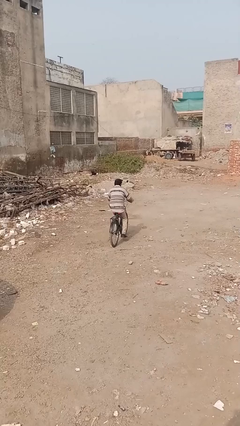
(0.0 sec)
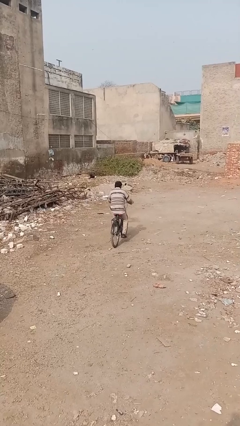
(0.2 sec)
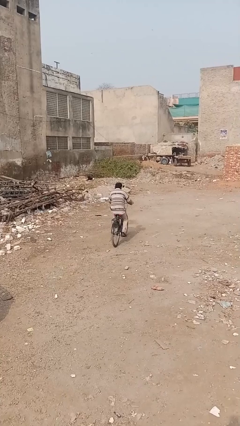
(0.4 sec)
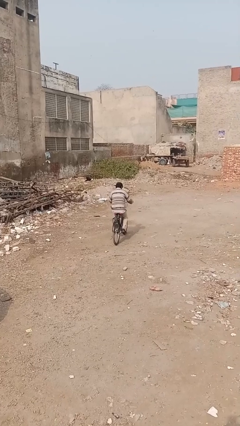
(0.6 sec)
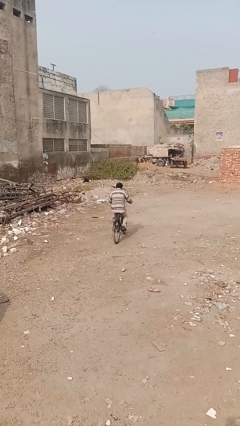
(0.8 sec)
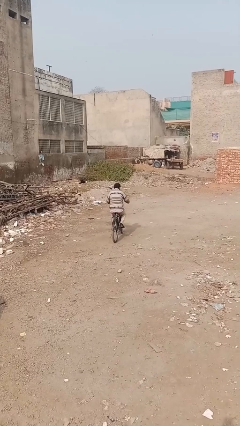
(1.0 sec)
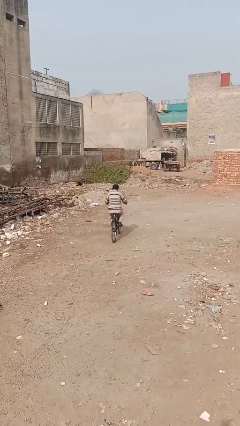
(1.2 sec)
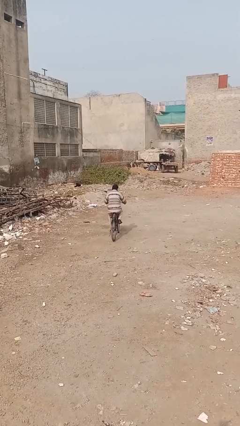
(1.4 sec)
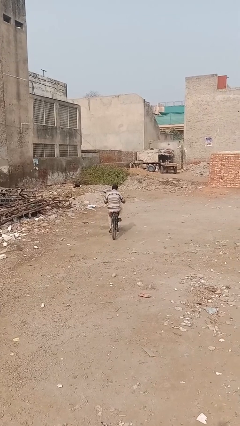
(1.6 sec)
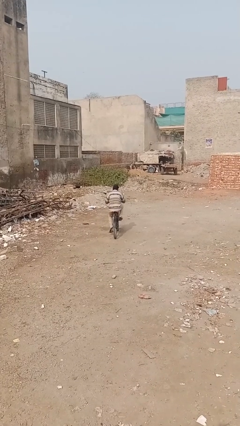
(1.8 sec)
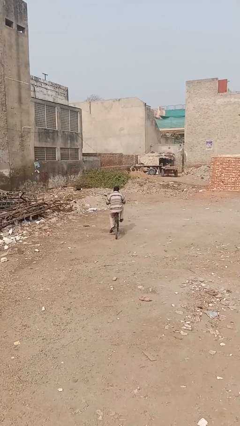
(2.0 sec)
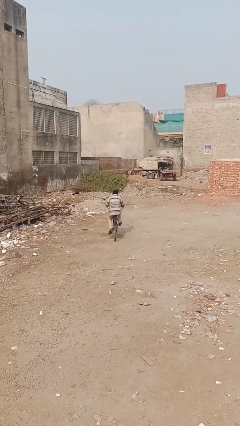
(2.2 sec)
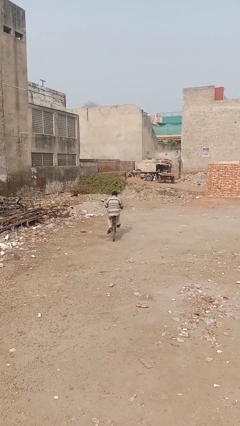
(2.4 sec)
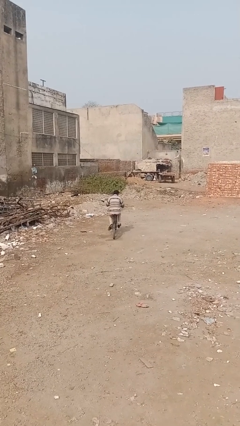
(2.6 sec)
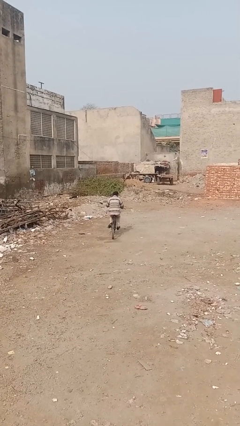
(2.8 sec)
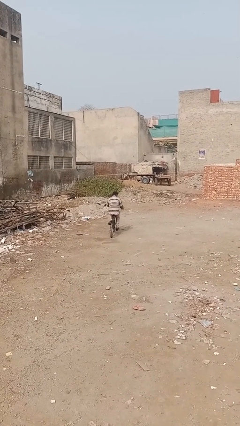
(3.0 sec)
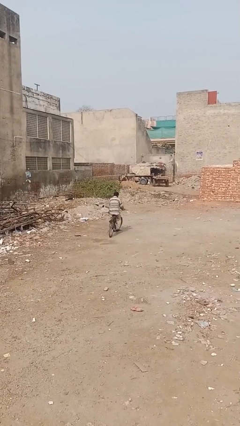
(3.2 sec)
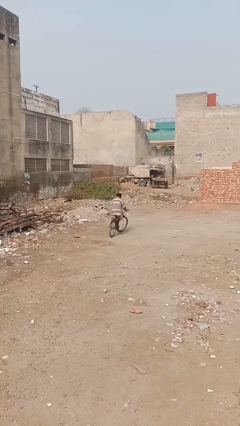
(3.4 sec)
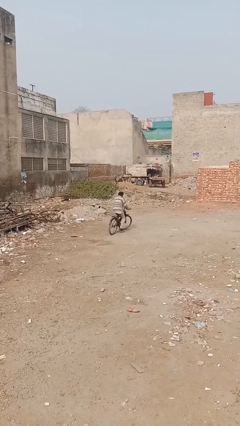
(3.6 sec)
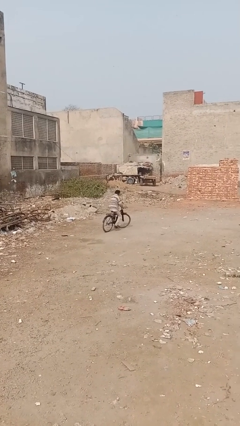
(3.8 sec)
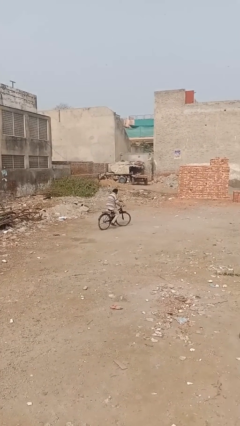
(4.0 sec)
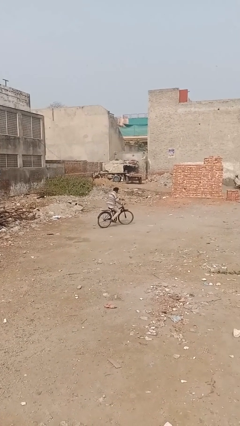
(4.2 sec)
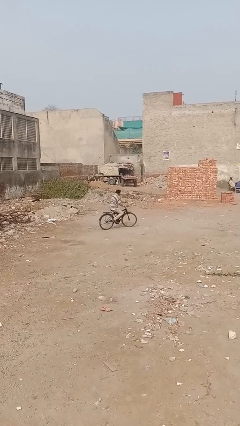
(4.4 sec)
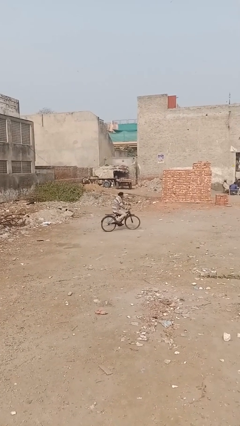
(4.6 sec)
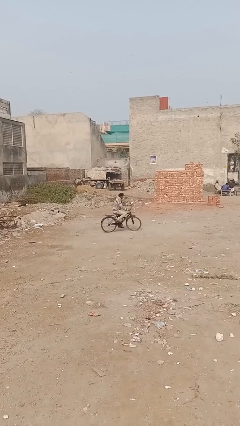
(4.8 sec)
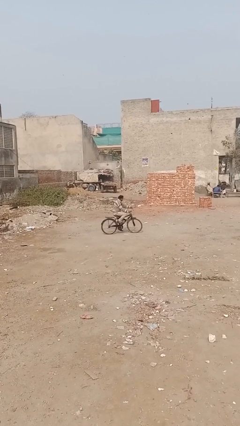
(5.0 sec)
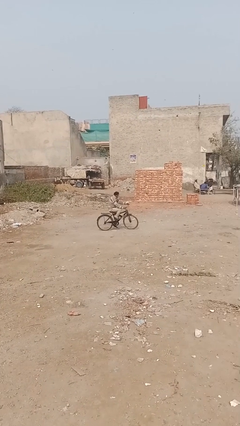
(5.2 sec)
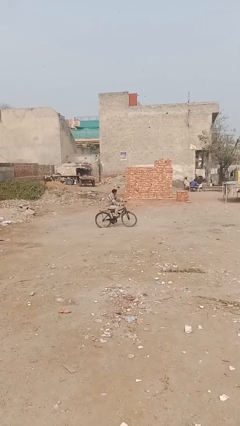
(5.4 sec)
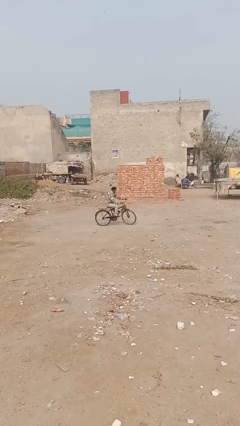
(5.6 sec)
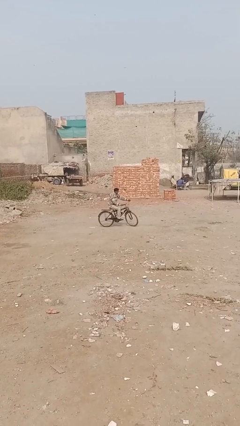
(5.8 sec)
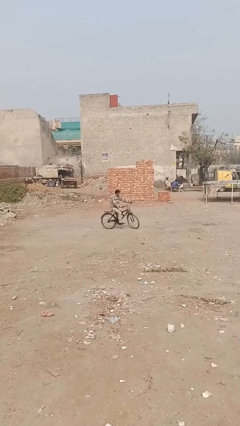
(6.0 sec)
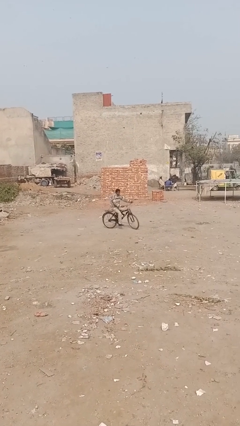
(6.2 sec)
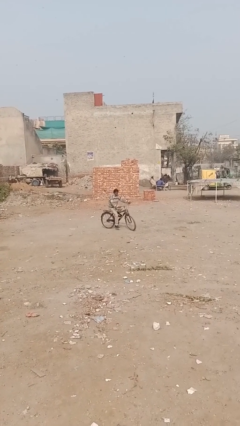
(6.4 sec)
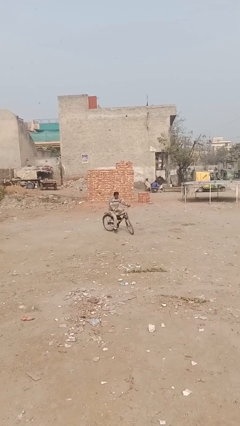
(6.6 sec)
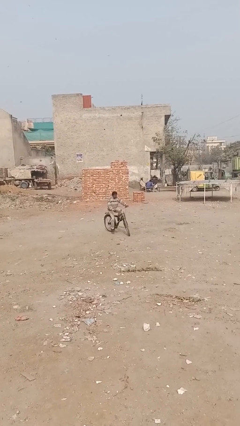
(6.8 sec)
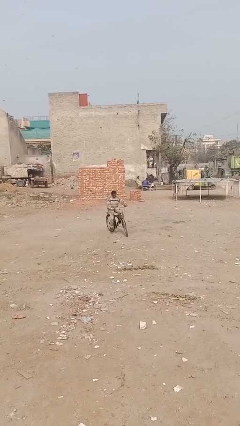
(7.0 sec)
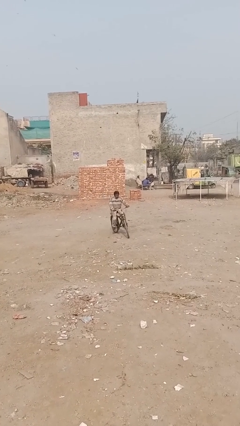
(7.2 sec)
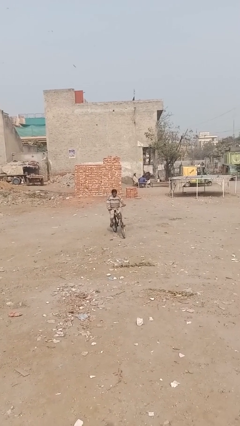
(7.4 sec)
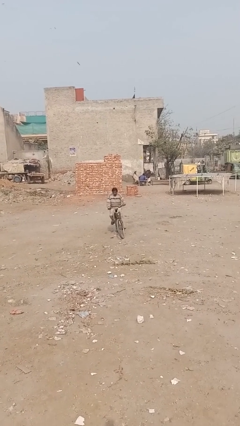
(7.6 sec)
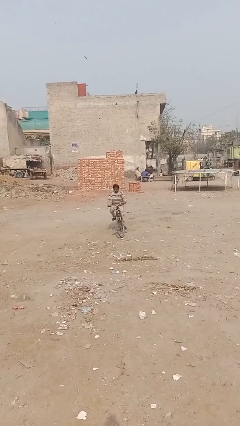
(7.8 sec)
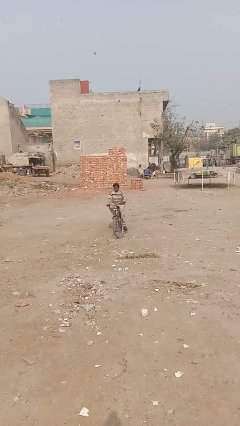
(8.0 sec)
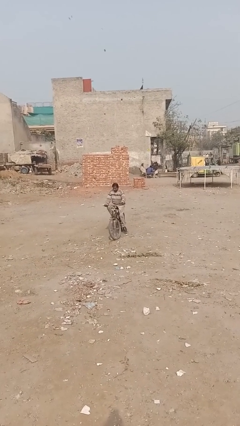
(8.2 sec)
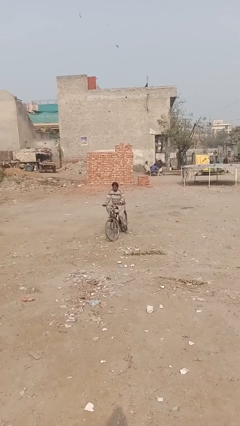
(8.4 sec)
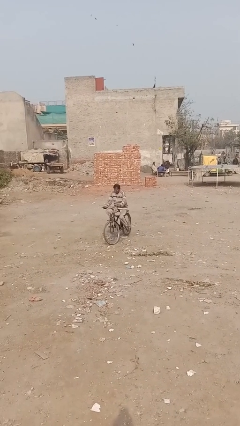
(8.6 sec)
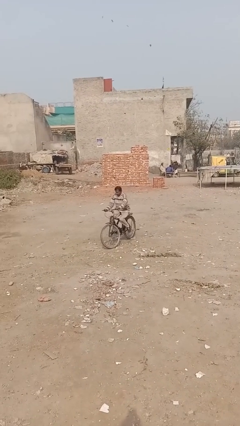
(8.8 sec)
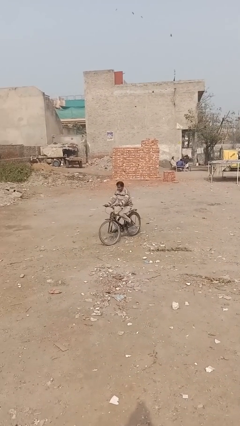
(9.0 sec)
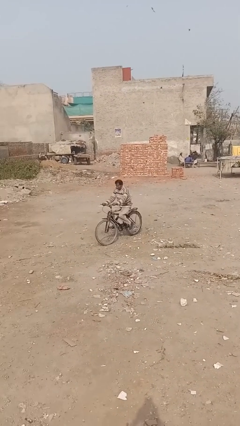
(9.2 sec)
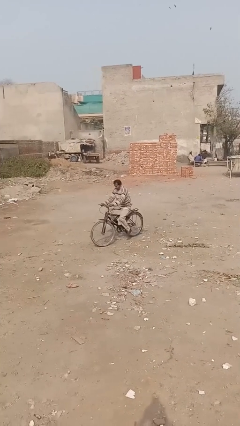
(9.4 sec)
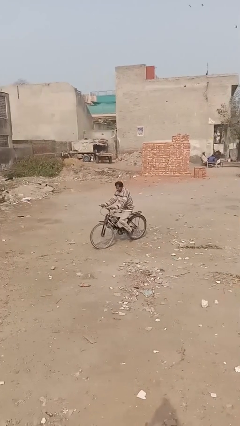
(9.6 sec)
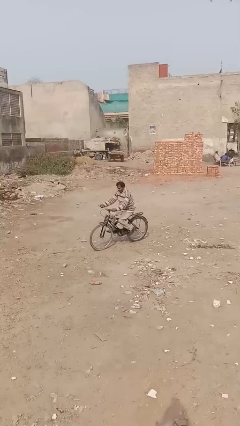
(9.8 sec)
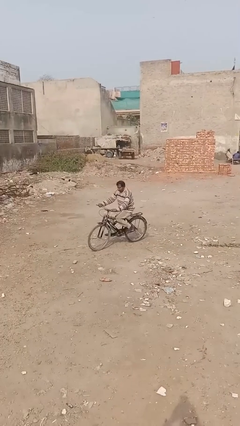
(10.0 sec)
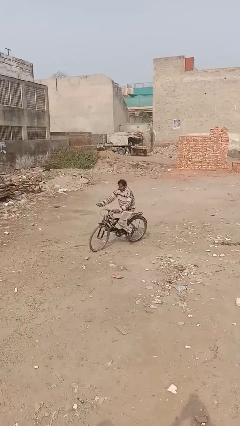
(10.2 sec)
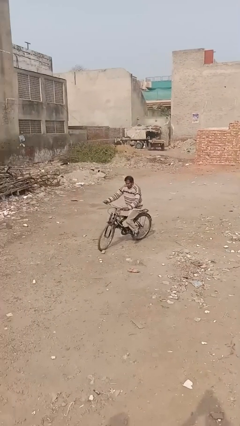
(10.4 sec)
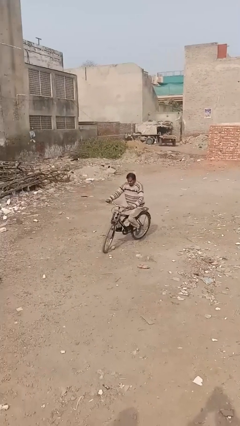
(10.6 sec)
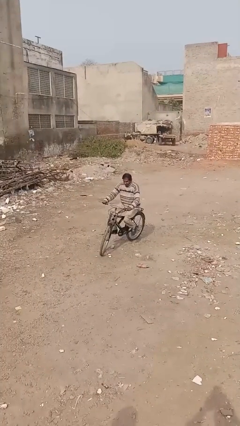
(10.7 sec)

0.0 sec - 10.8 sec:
person rides bicycle

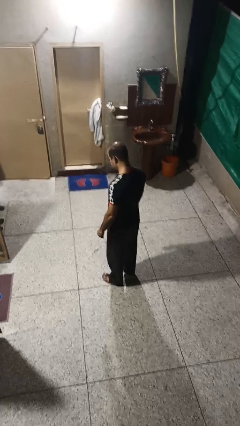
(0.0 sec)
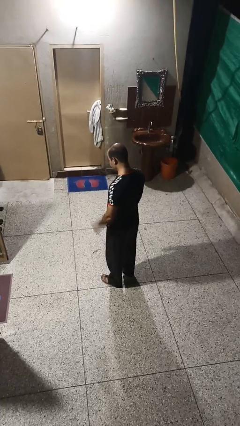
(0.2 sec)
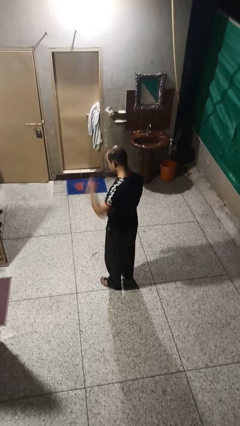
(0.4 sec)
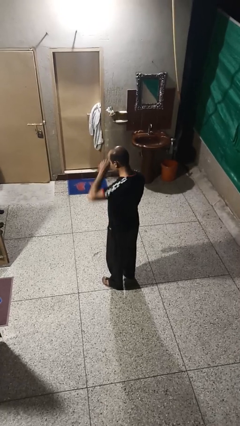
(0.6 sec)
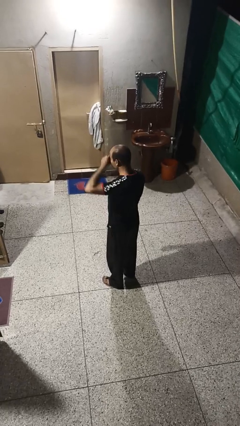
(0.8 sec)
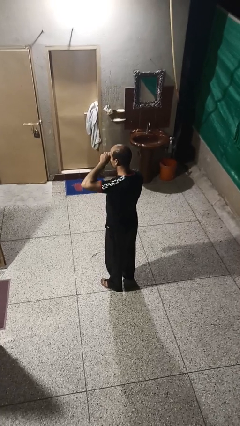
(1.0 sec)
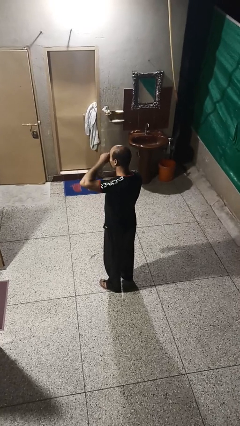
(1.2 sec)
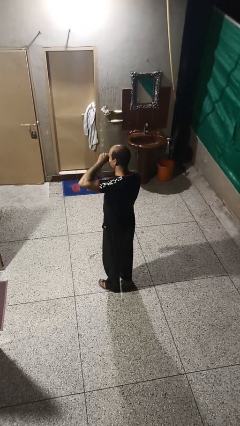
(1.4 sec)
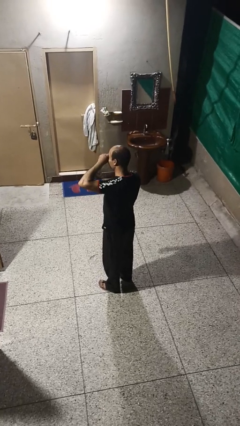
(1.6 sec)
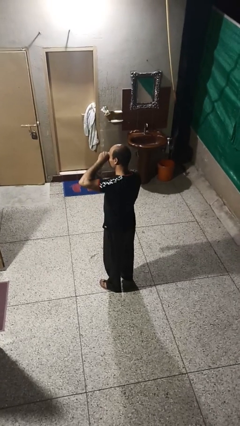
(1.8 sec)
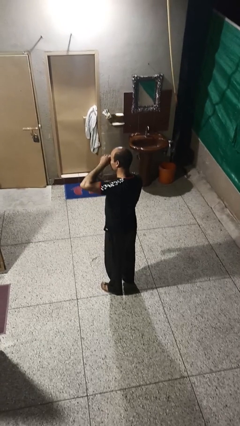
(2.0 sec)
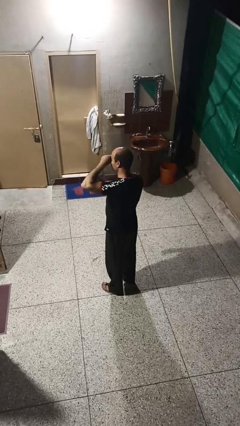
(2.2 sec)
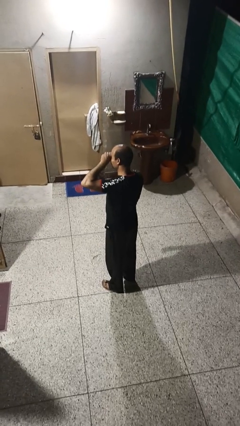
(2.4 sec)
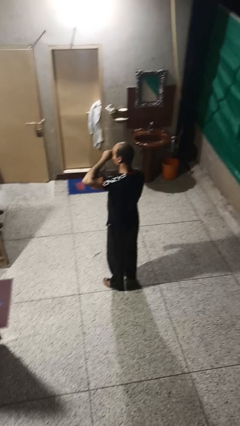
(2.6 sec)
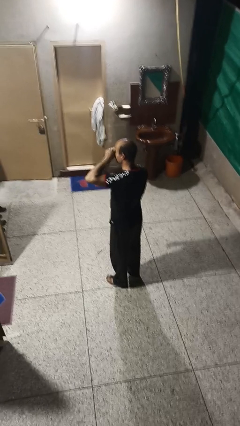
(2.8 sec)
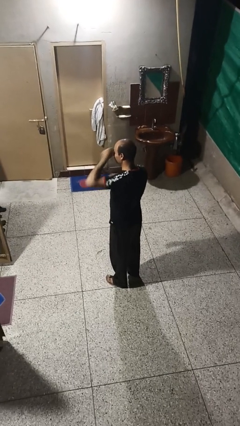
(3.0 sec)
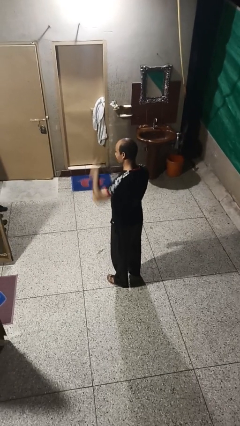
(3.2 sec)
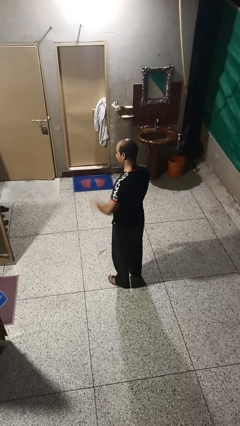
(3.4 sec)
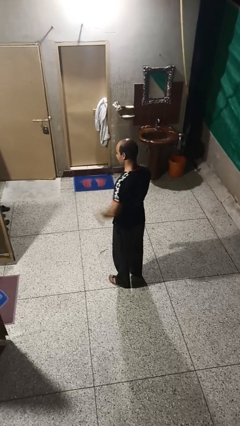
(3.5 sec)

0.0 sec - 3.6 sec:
person rubs eyes

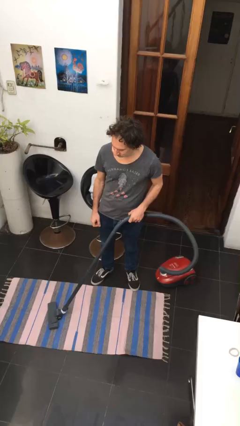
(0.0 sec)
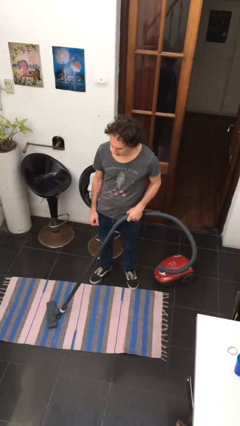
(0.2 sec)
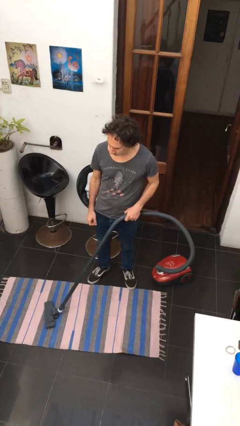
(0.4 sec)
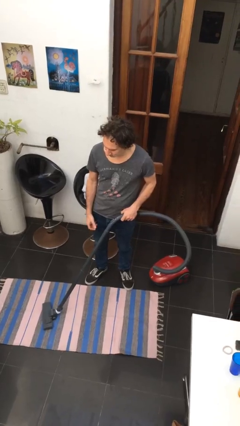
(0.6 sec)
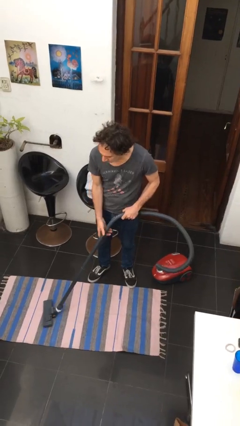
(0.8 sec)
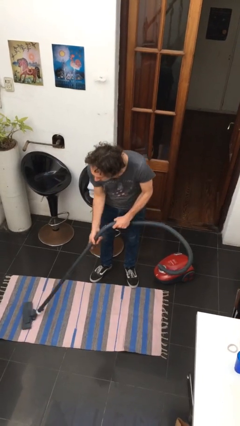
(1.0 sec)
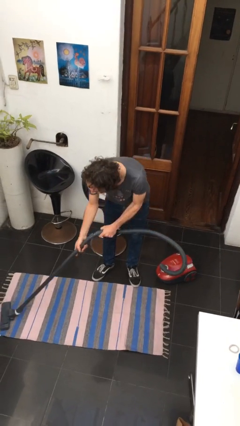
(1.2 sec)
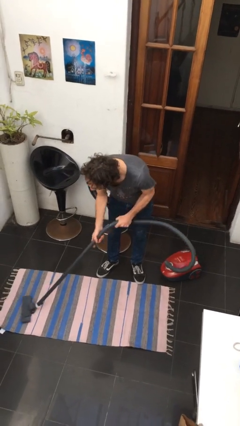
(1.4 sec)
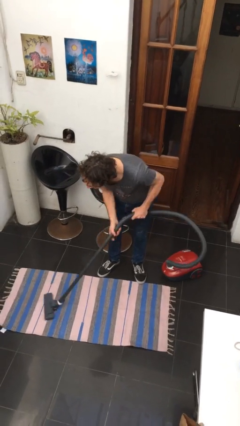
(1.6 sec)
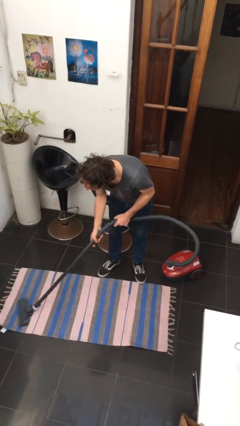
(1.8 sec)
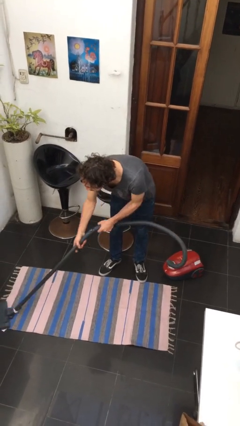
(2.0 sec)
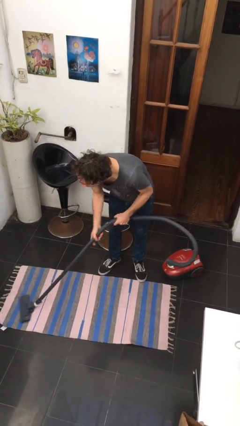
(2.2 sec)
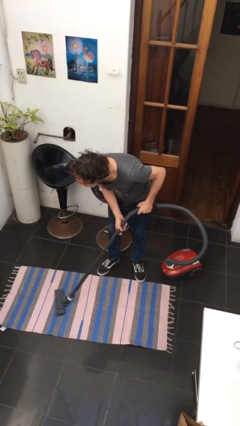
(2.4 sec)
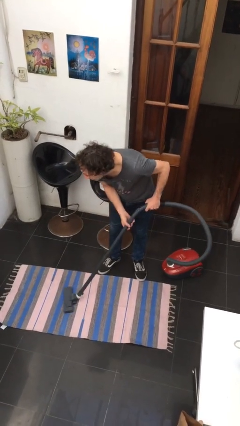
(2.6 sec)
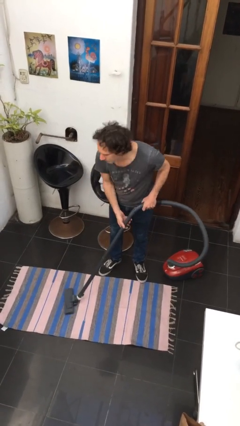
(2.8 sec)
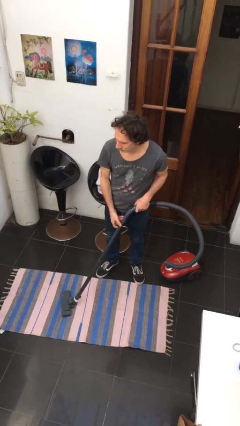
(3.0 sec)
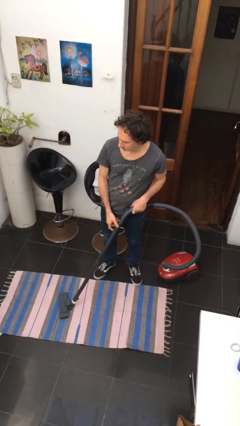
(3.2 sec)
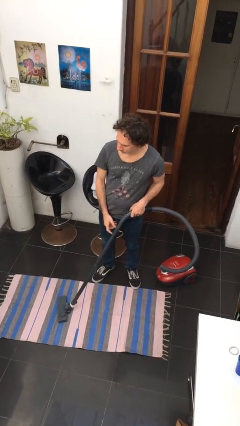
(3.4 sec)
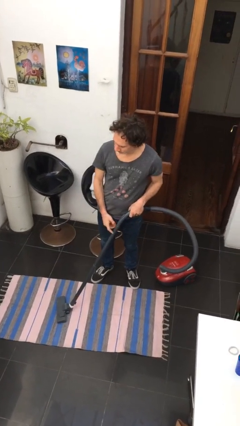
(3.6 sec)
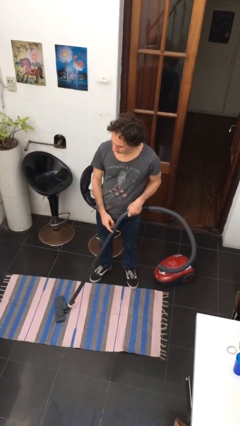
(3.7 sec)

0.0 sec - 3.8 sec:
person vacuums carpet
